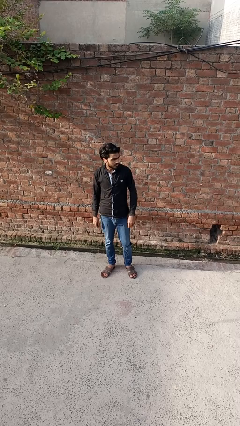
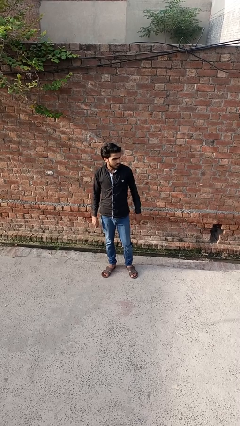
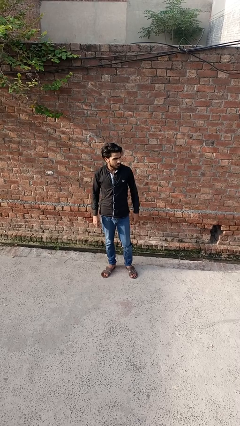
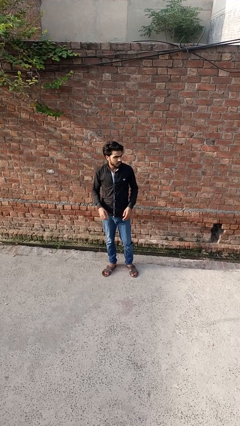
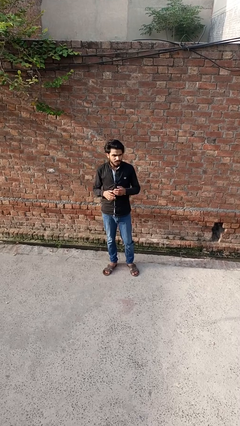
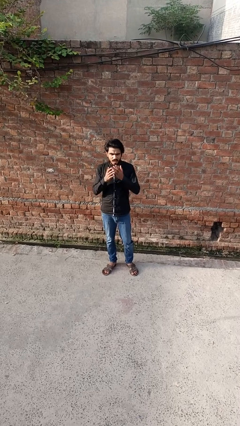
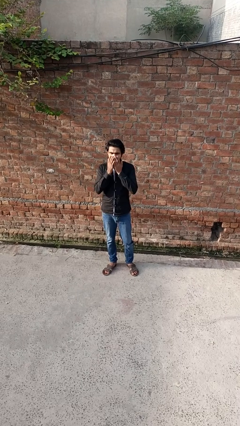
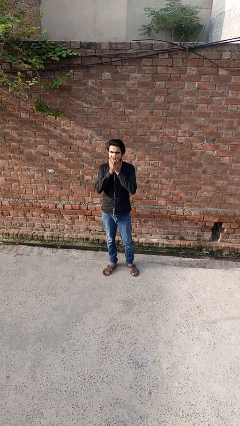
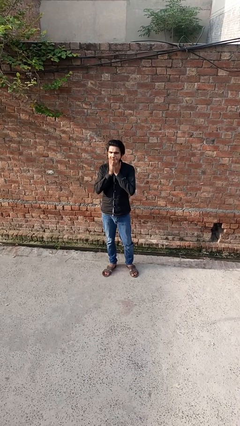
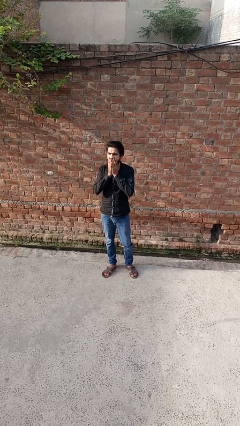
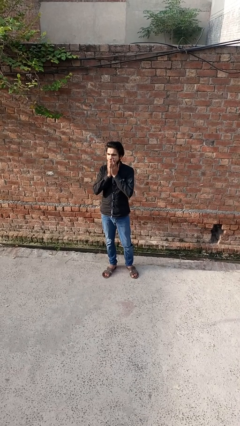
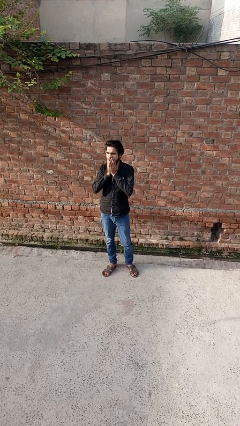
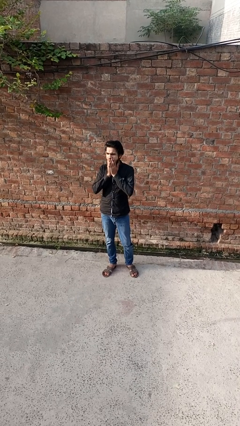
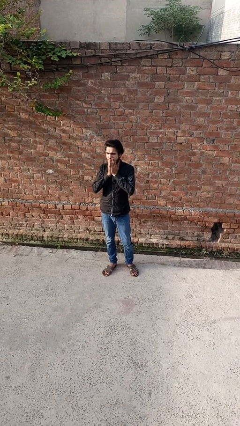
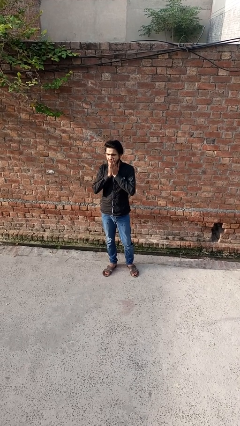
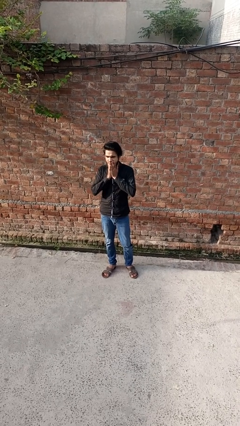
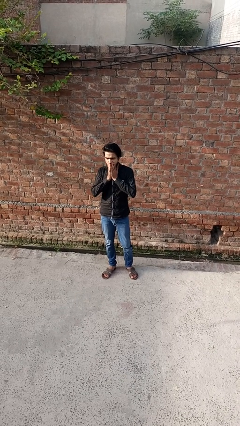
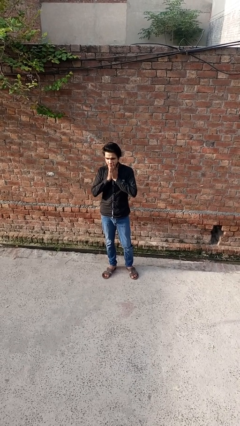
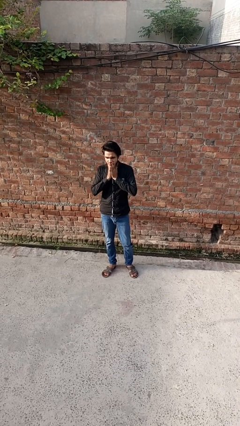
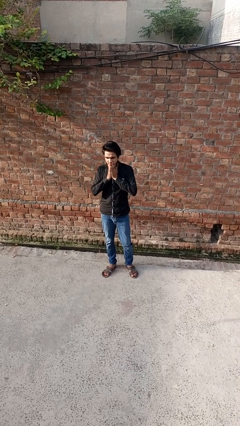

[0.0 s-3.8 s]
person yawns

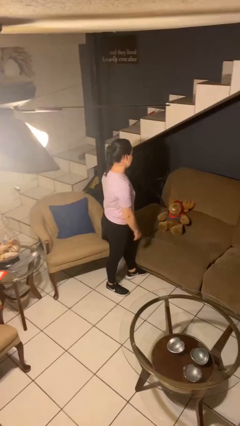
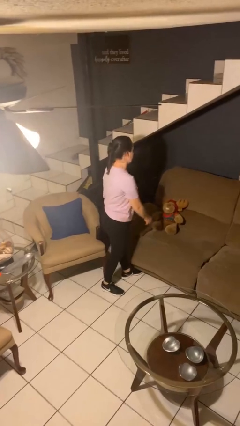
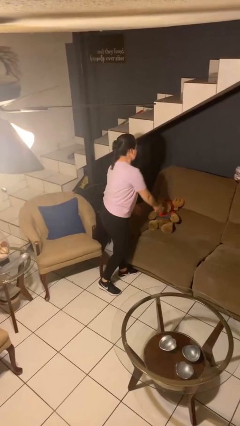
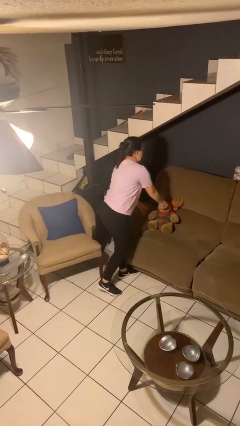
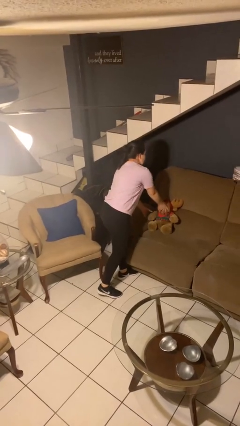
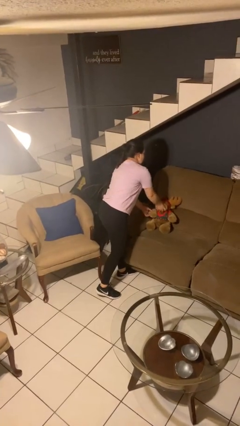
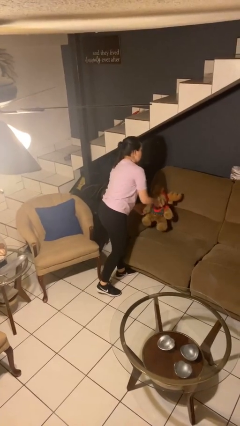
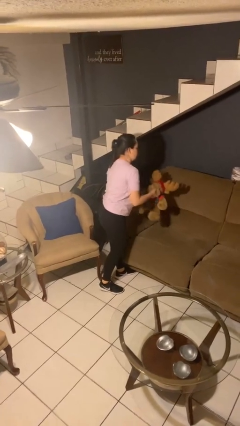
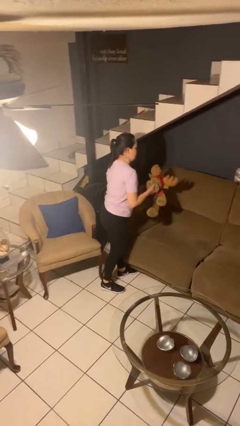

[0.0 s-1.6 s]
person picks up object from couch

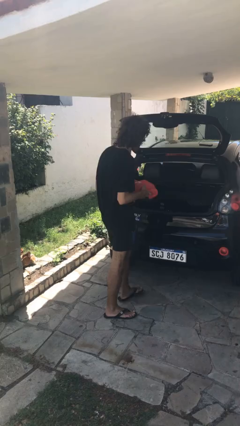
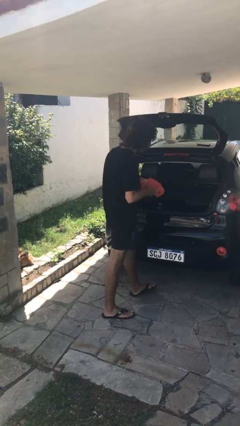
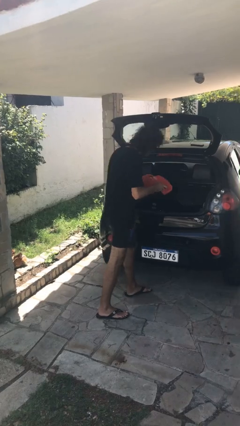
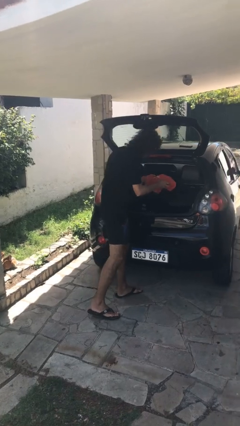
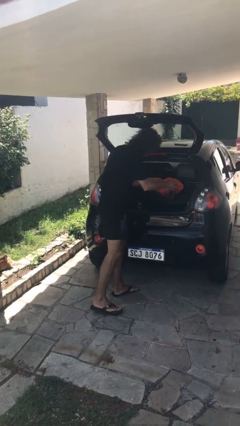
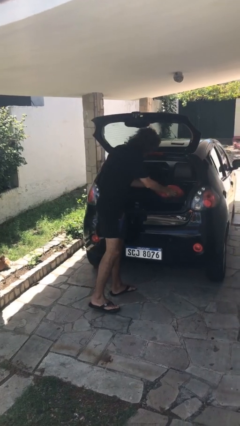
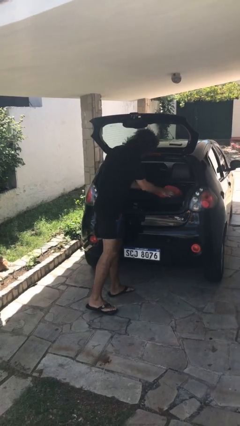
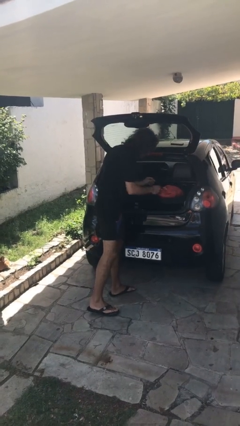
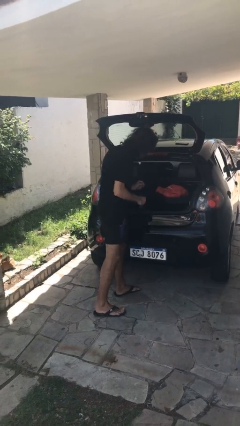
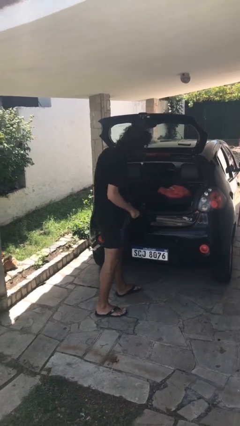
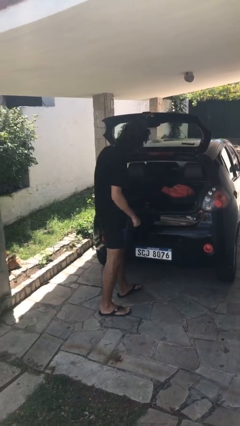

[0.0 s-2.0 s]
person loads car

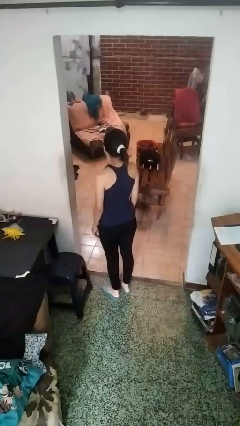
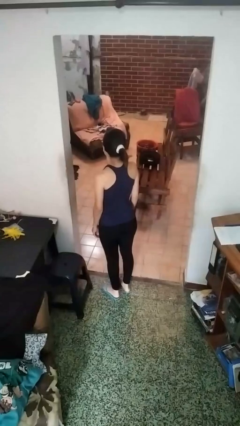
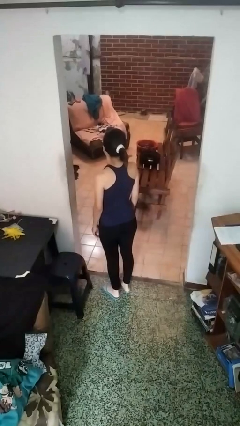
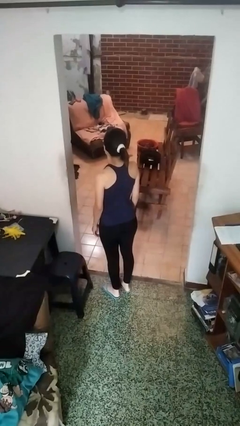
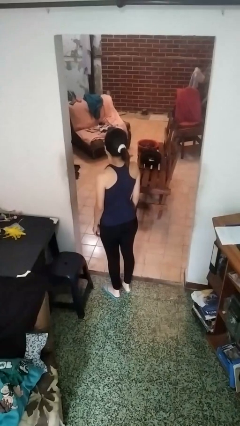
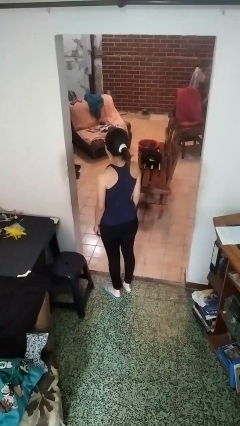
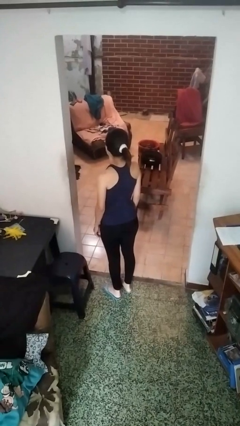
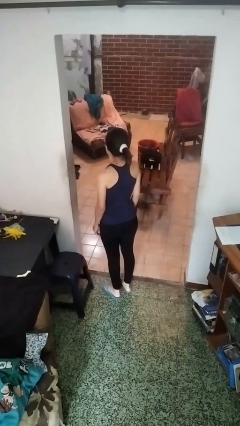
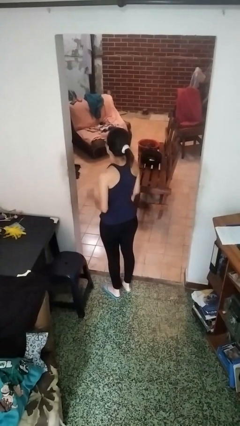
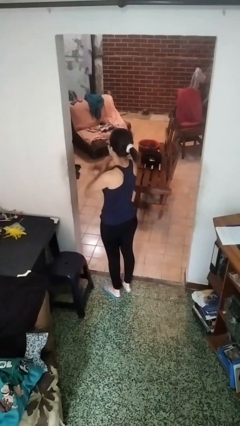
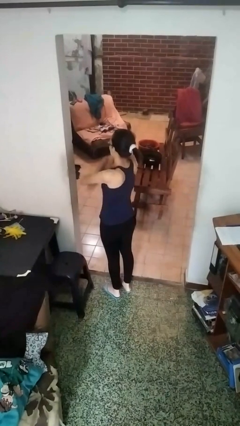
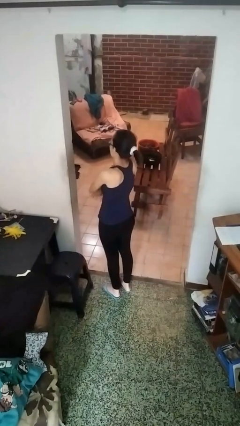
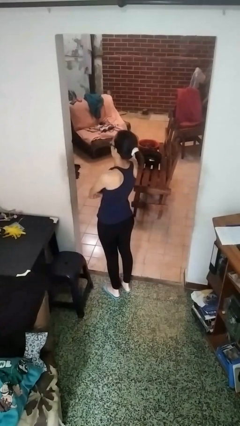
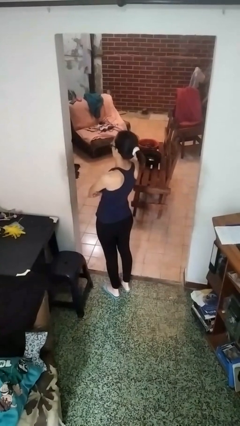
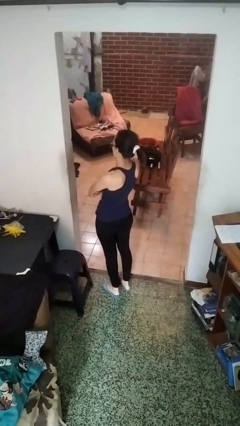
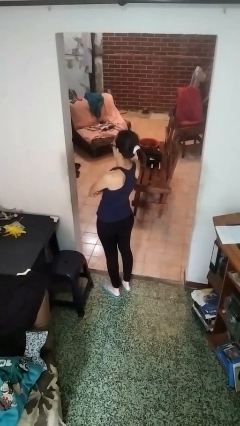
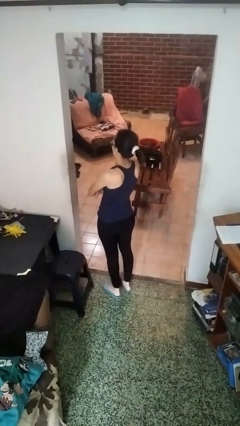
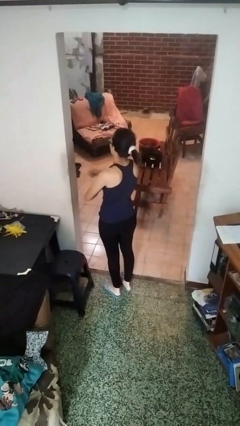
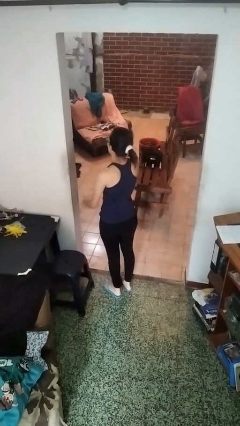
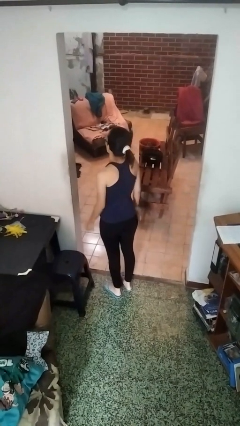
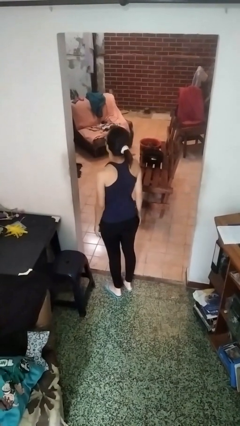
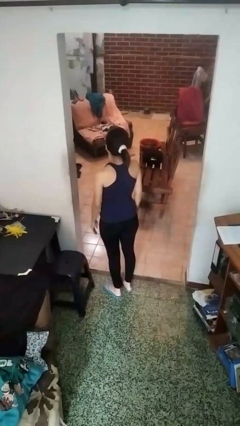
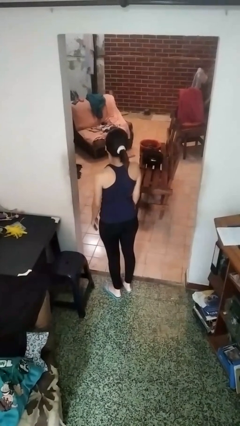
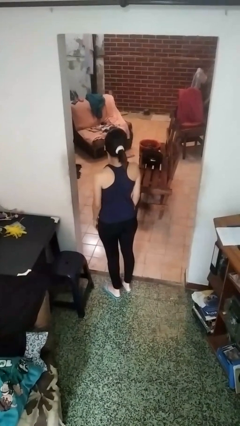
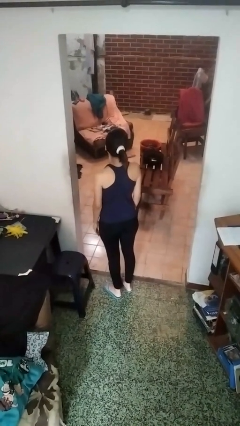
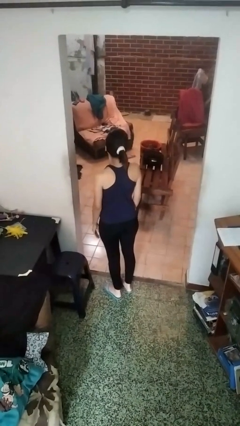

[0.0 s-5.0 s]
person gestures arms x

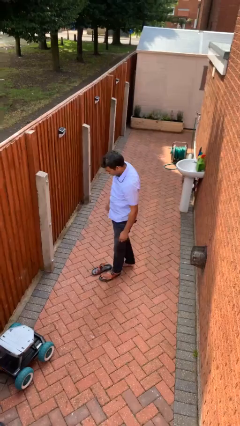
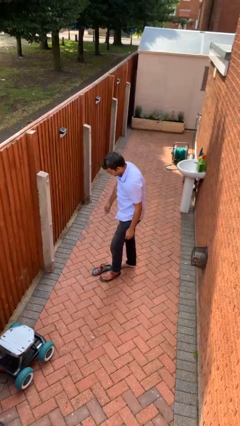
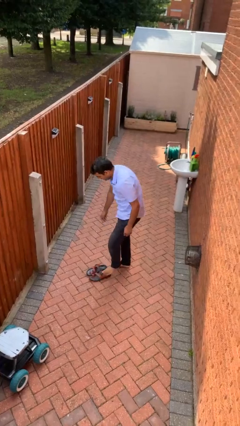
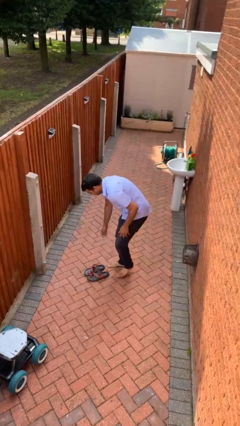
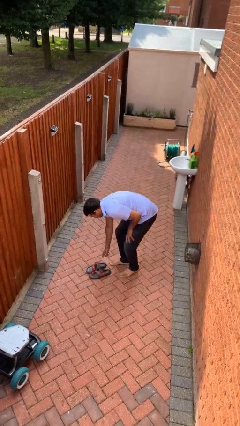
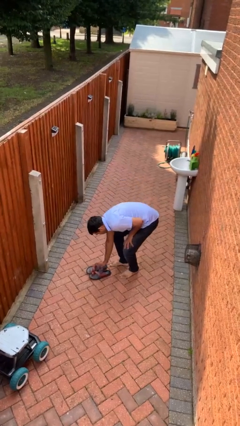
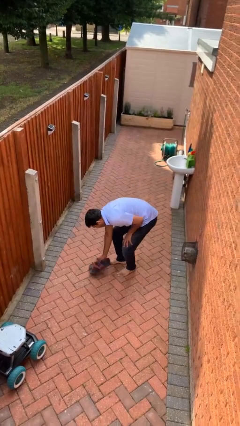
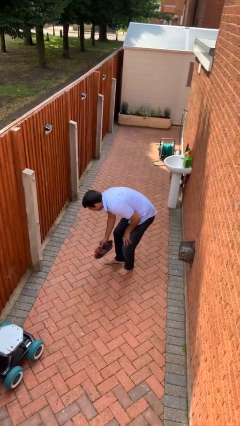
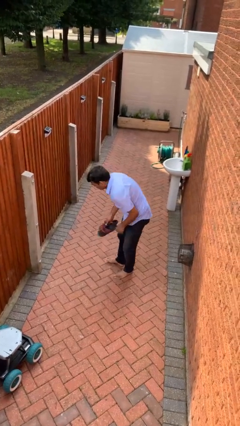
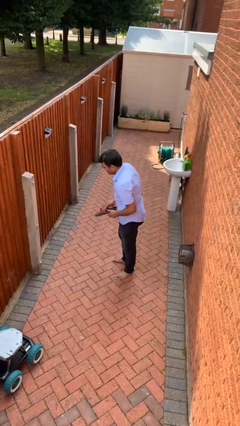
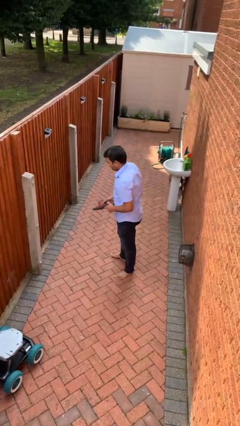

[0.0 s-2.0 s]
person takes off shoes

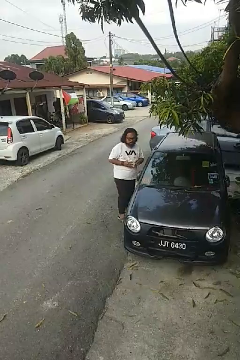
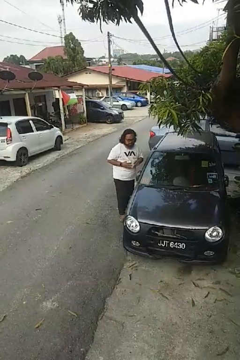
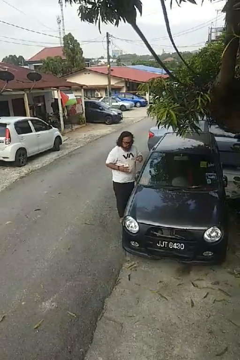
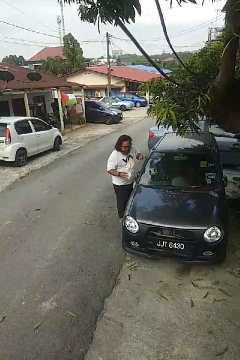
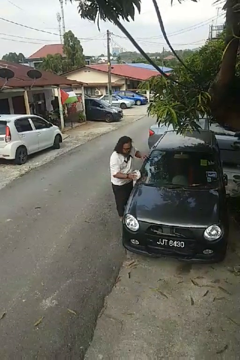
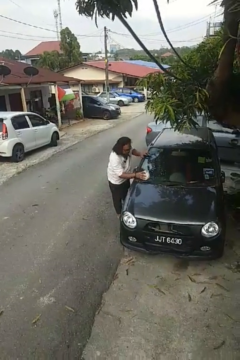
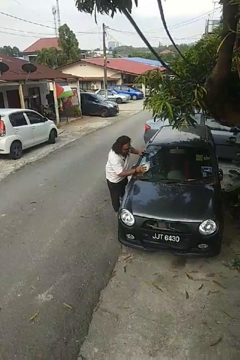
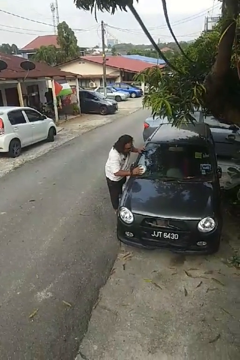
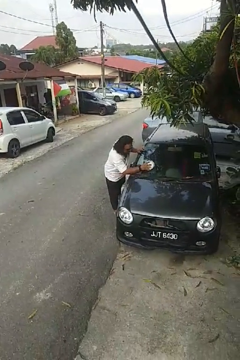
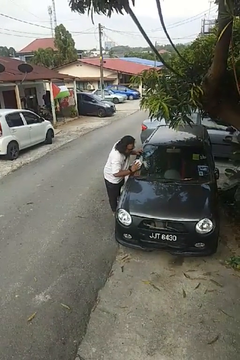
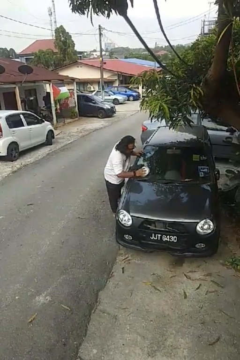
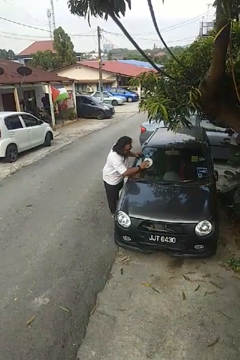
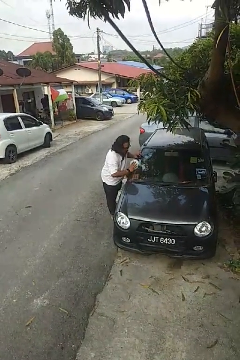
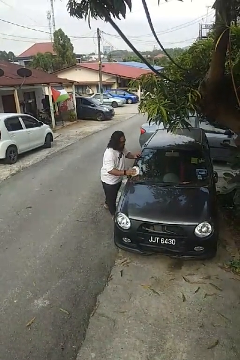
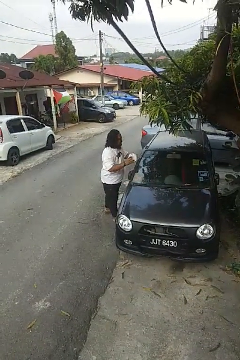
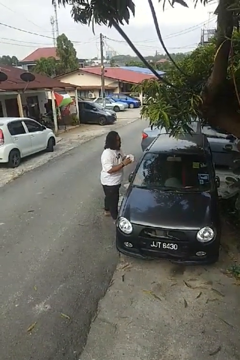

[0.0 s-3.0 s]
person polishes car with rag

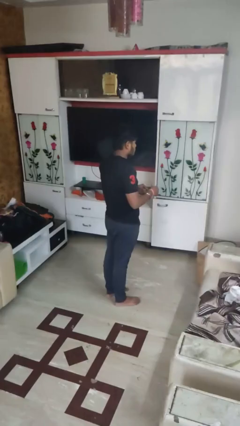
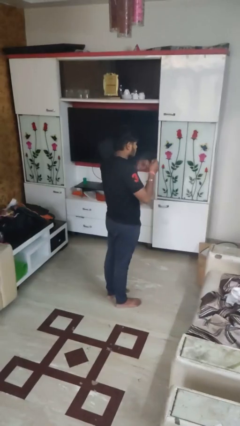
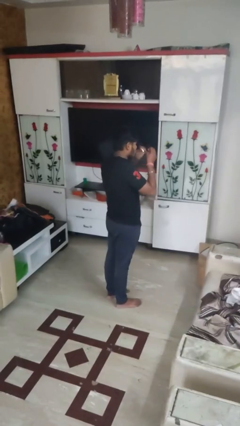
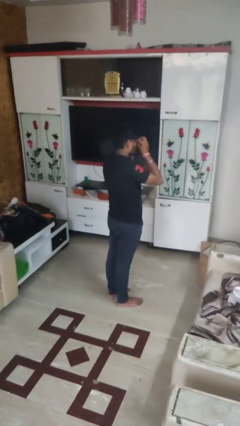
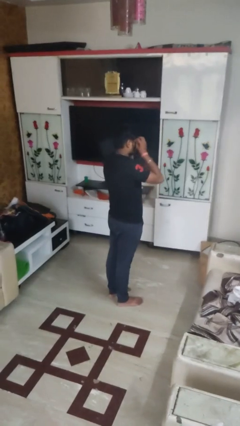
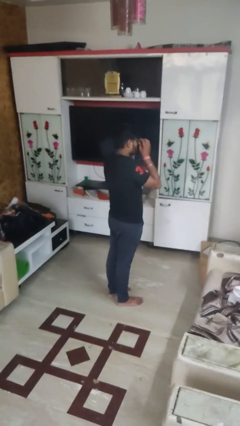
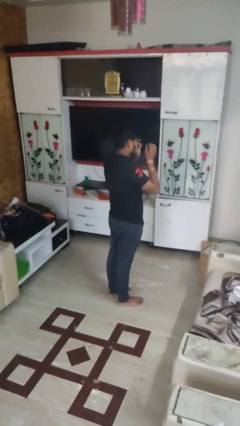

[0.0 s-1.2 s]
person puts on glasses
